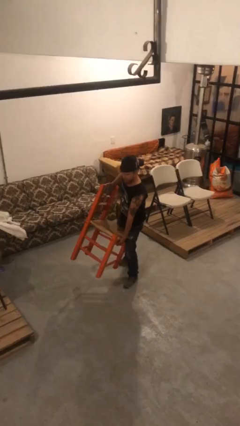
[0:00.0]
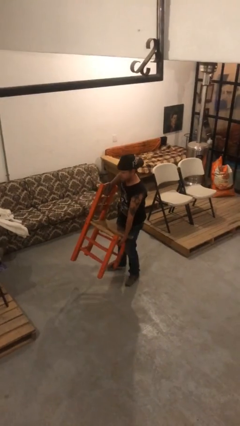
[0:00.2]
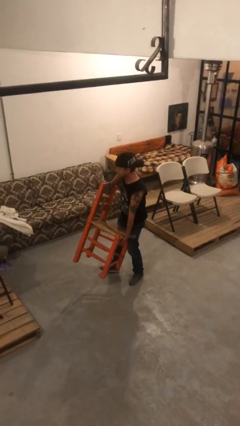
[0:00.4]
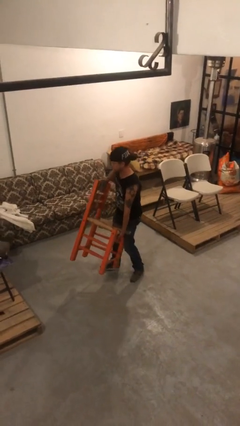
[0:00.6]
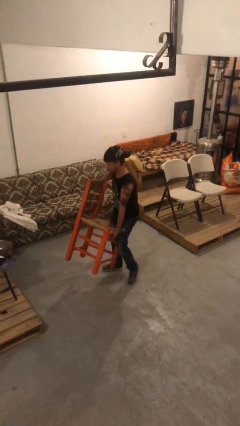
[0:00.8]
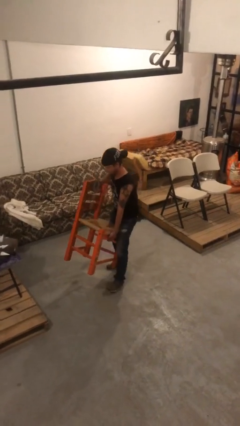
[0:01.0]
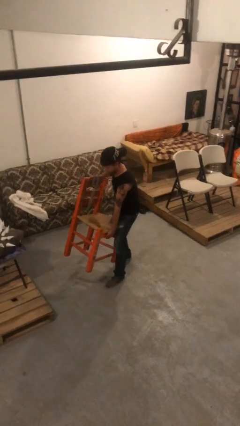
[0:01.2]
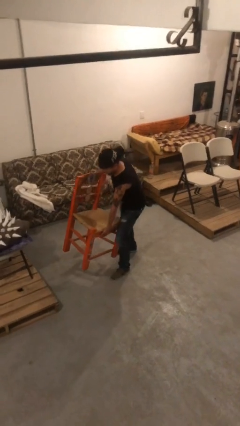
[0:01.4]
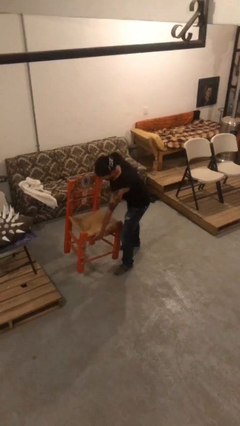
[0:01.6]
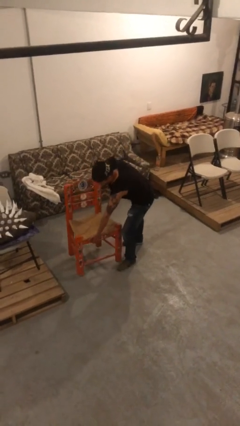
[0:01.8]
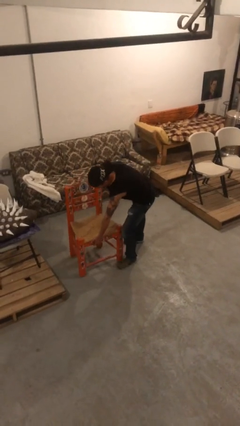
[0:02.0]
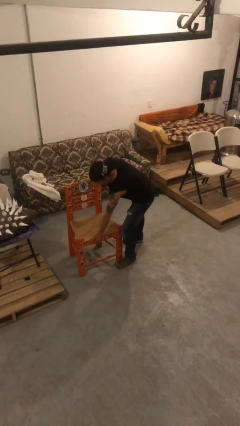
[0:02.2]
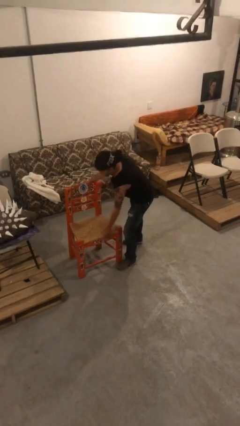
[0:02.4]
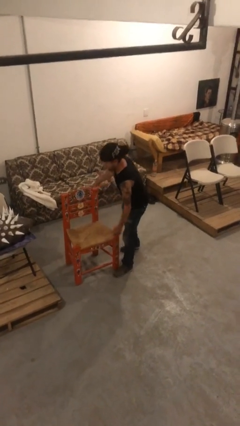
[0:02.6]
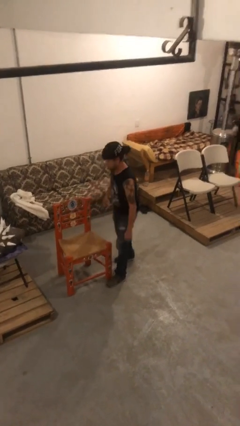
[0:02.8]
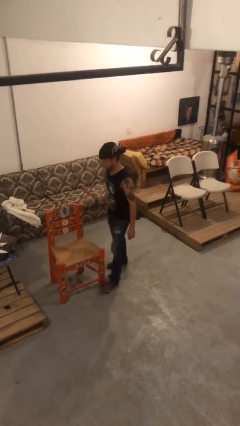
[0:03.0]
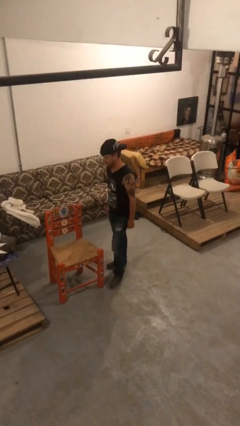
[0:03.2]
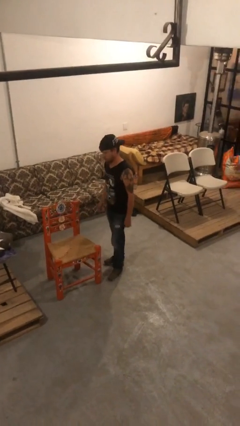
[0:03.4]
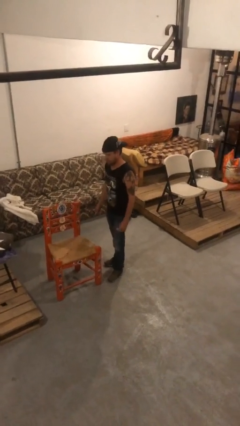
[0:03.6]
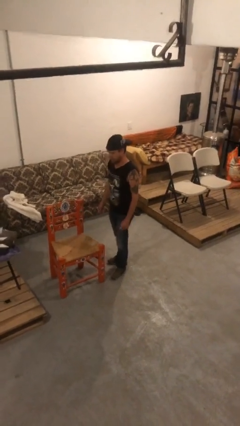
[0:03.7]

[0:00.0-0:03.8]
person puts down object on floor

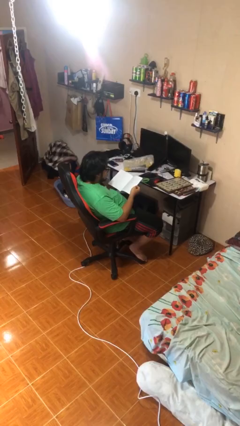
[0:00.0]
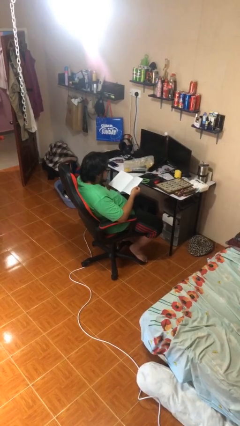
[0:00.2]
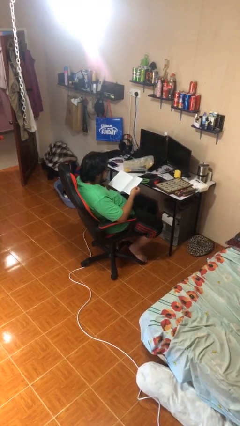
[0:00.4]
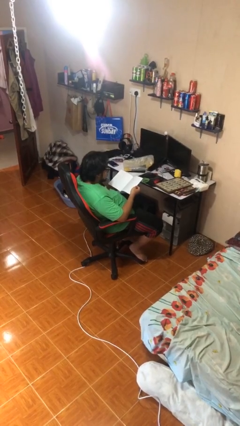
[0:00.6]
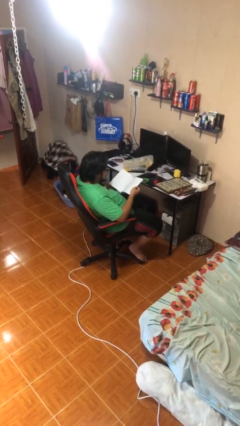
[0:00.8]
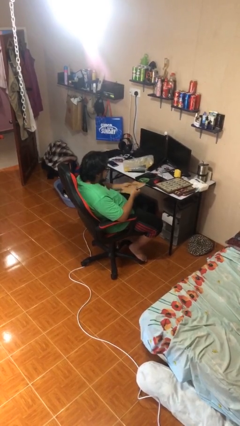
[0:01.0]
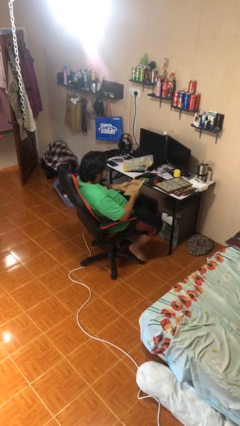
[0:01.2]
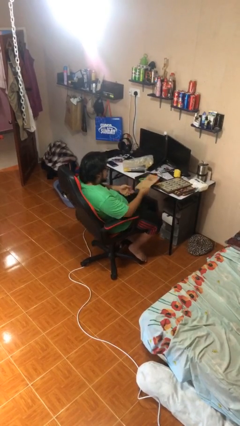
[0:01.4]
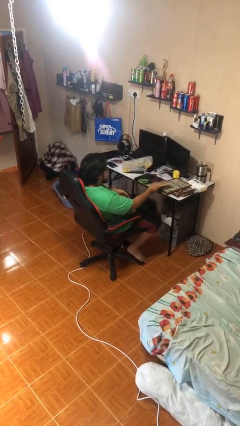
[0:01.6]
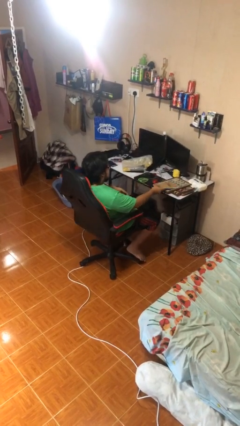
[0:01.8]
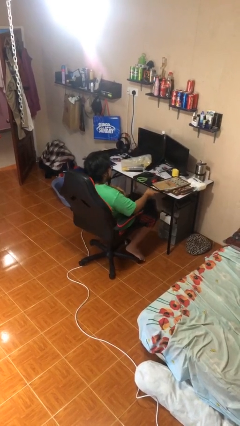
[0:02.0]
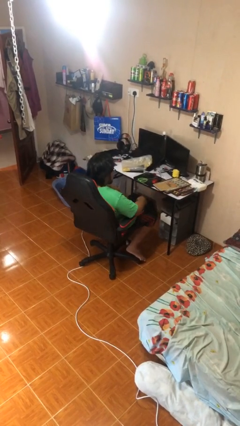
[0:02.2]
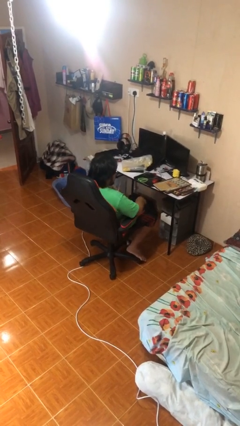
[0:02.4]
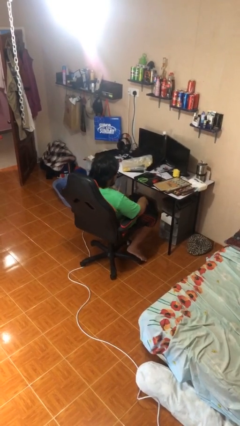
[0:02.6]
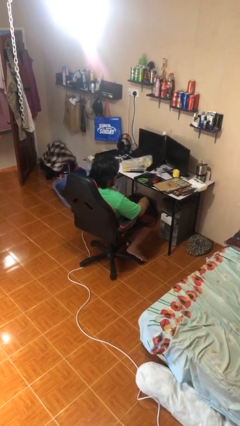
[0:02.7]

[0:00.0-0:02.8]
person puts down object on table

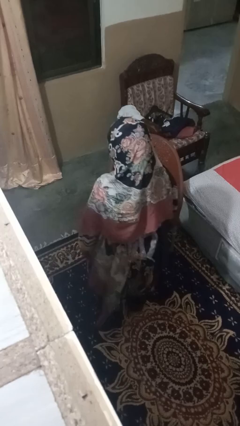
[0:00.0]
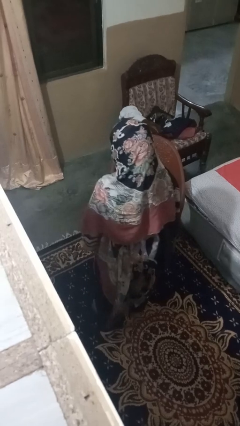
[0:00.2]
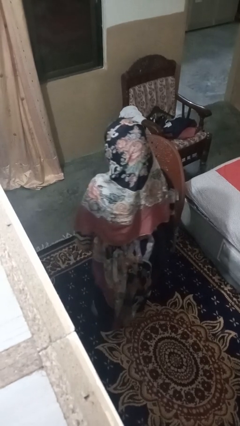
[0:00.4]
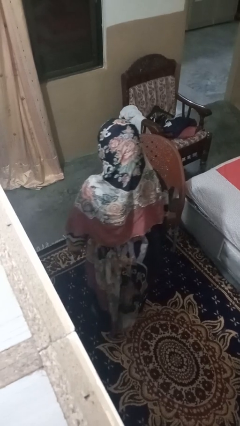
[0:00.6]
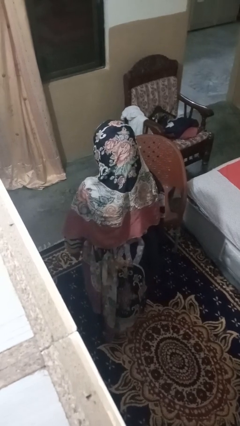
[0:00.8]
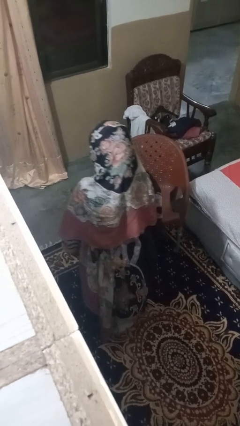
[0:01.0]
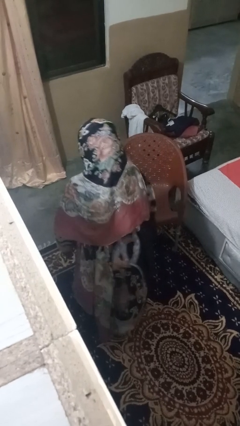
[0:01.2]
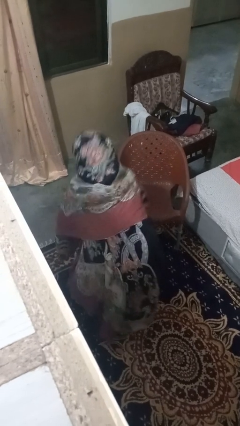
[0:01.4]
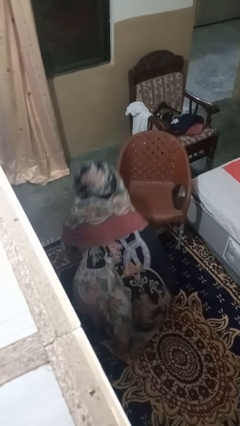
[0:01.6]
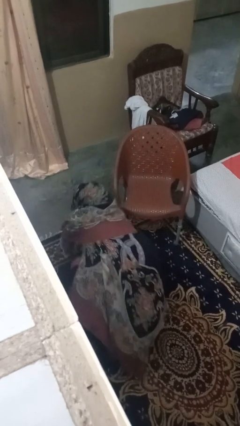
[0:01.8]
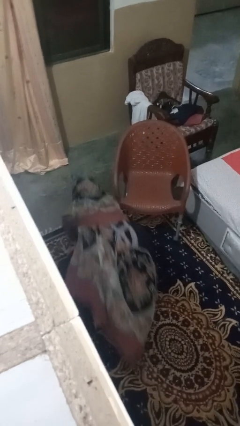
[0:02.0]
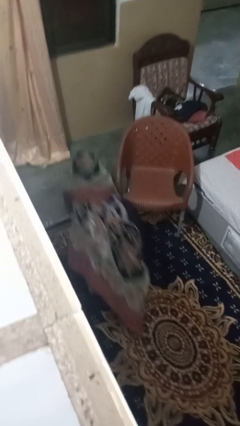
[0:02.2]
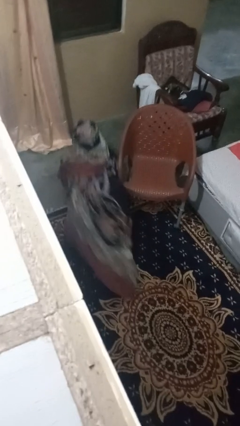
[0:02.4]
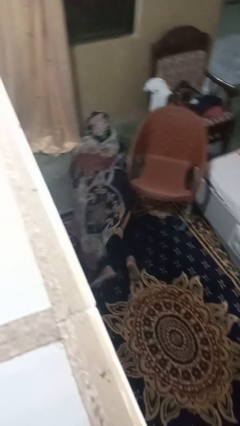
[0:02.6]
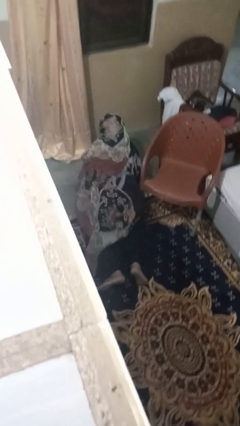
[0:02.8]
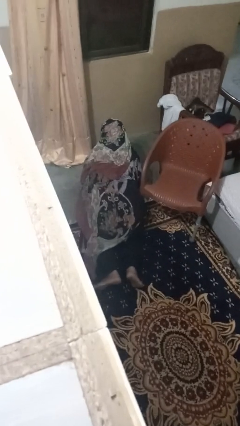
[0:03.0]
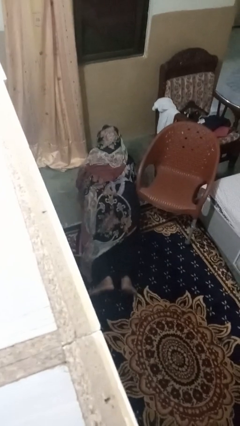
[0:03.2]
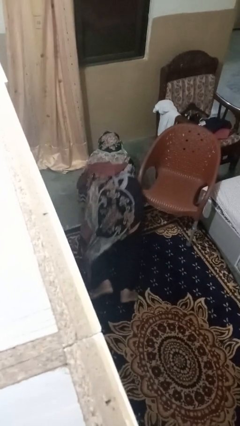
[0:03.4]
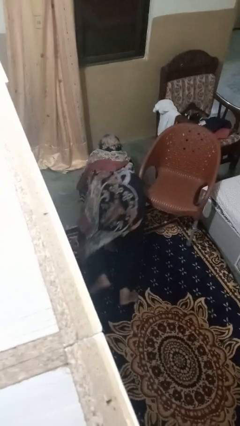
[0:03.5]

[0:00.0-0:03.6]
person lies down on floor

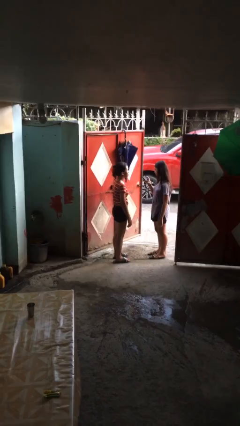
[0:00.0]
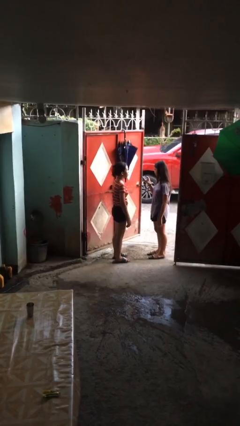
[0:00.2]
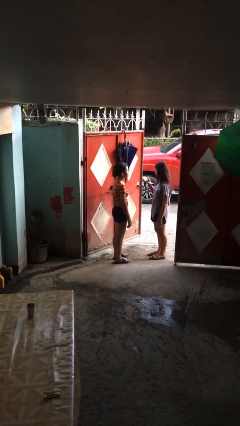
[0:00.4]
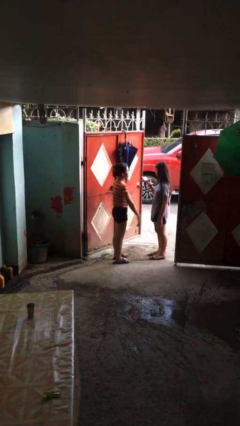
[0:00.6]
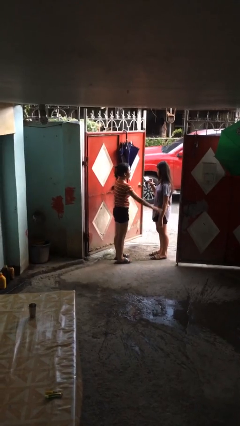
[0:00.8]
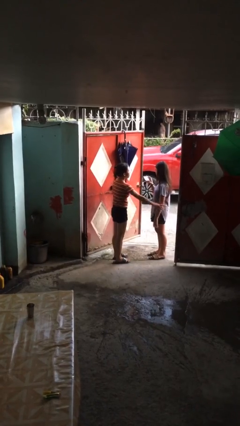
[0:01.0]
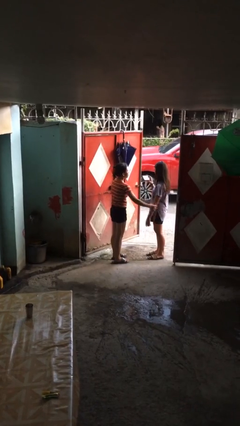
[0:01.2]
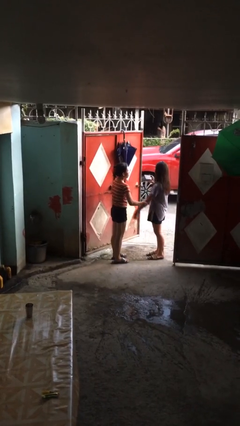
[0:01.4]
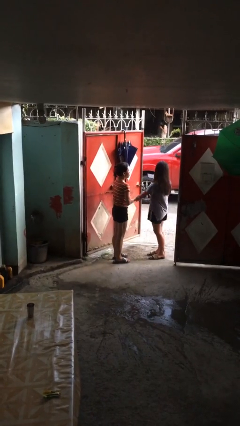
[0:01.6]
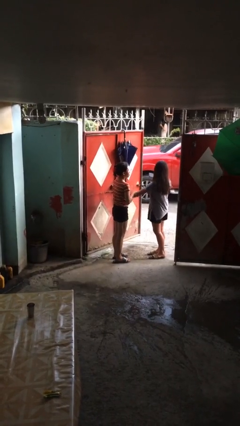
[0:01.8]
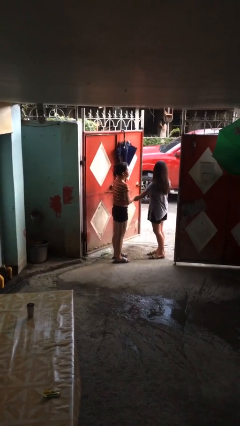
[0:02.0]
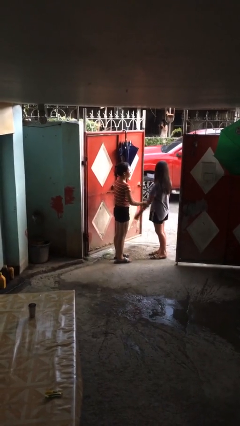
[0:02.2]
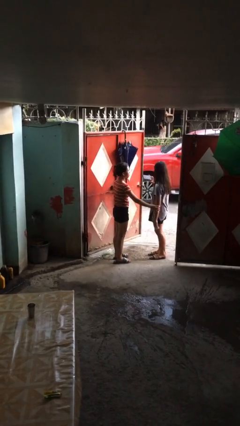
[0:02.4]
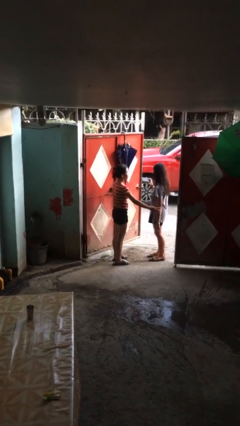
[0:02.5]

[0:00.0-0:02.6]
person grabs person by forearm

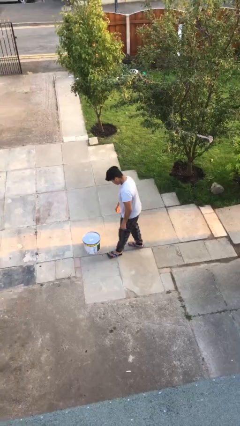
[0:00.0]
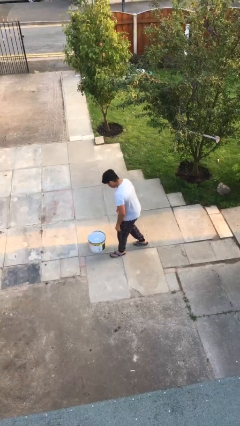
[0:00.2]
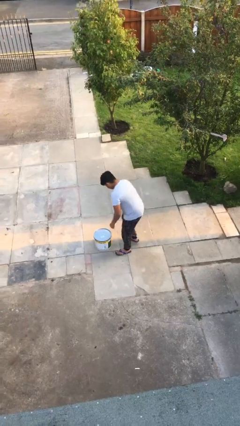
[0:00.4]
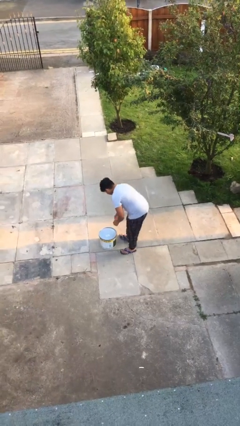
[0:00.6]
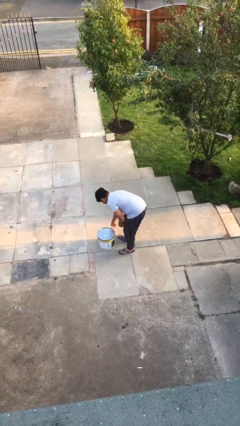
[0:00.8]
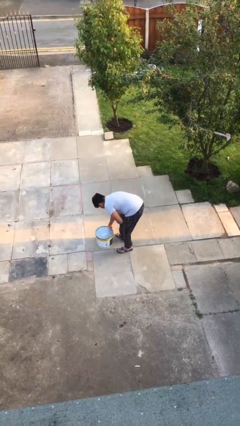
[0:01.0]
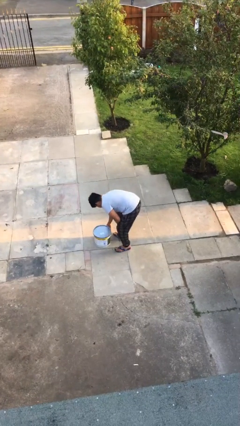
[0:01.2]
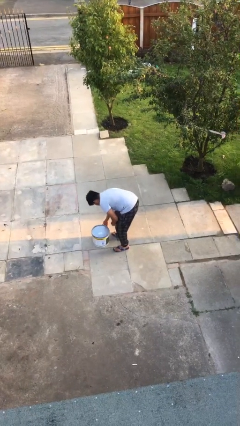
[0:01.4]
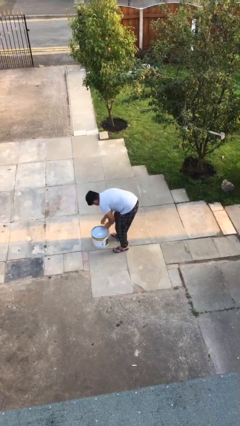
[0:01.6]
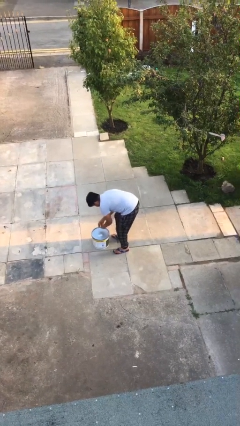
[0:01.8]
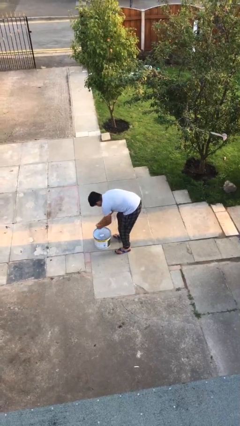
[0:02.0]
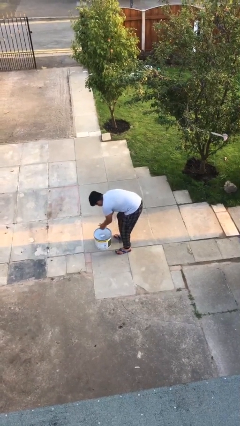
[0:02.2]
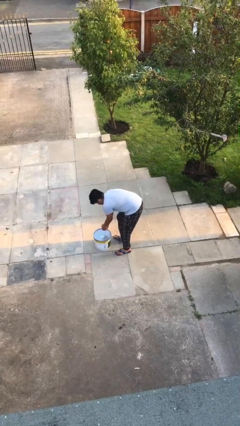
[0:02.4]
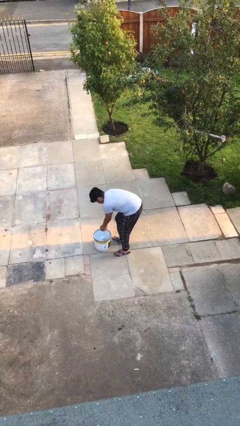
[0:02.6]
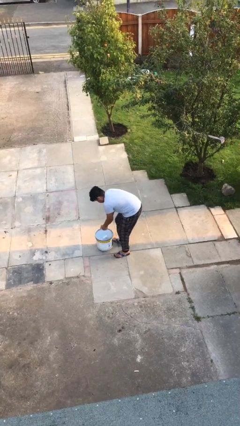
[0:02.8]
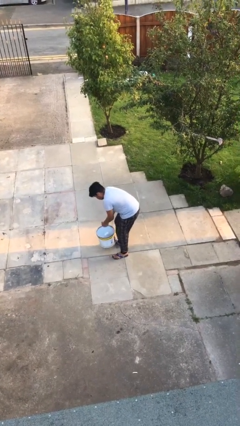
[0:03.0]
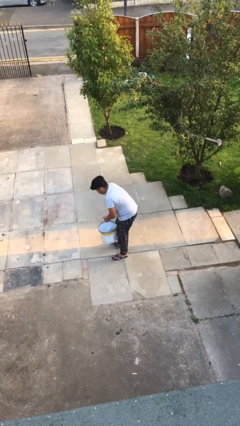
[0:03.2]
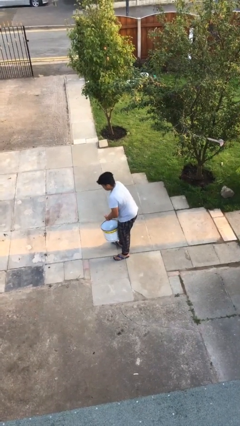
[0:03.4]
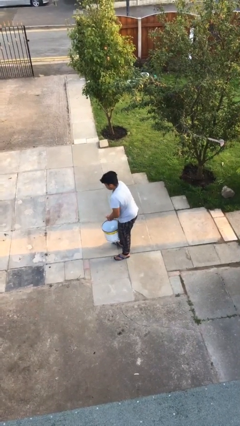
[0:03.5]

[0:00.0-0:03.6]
person picks up object from floor

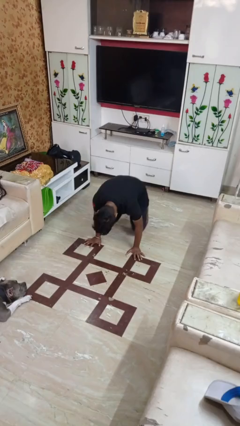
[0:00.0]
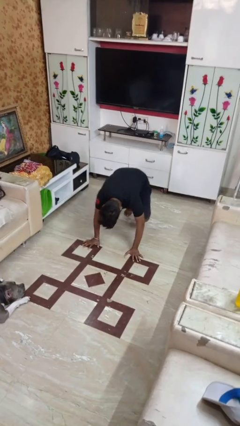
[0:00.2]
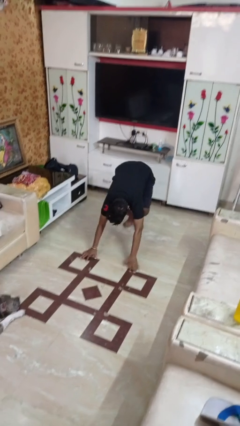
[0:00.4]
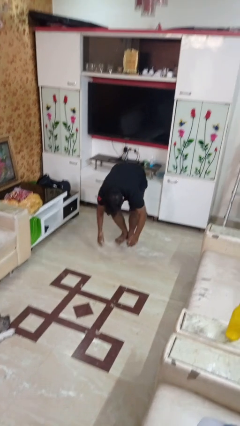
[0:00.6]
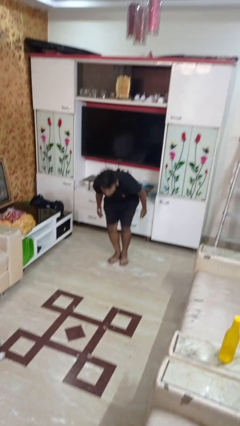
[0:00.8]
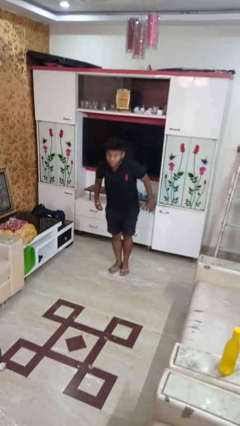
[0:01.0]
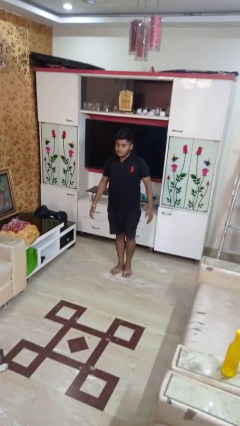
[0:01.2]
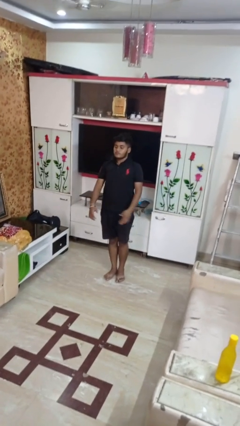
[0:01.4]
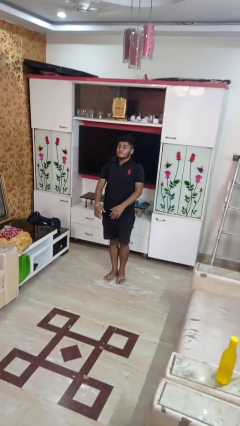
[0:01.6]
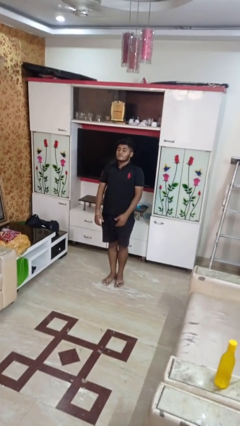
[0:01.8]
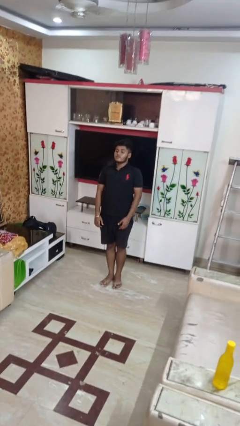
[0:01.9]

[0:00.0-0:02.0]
person stands up from floor
